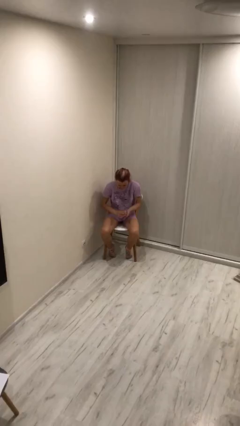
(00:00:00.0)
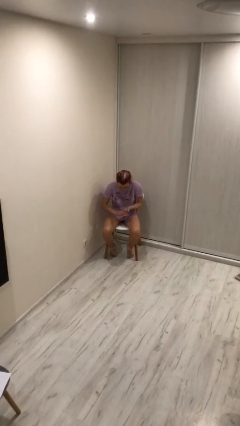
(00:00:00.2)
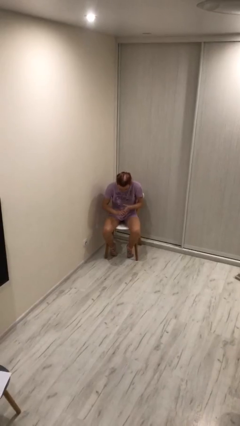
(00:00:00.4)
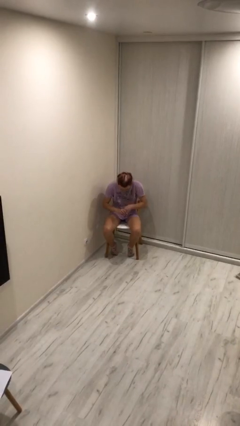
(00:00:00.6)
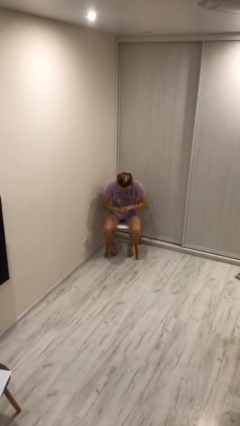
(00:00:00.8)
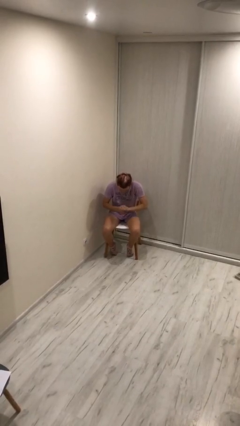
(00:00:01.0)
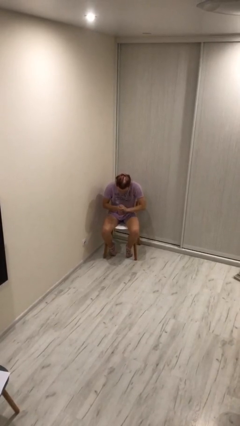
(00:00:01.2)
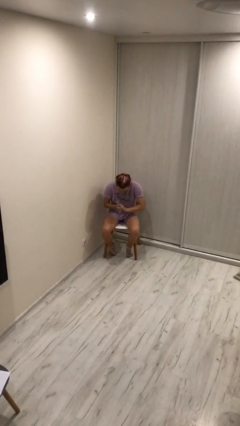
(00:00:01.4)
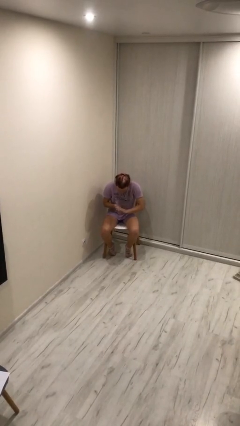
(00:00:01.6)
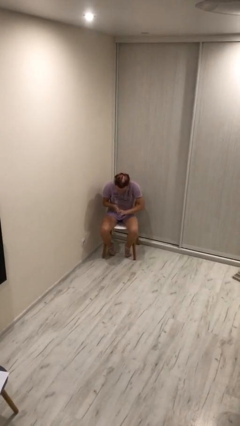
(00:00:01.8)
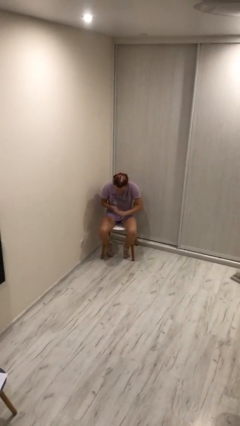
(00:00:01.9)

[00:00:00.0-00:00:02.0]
person looks at hands in lap

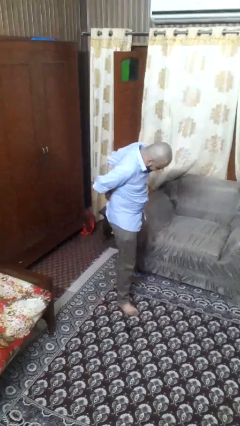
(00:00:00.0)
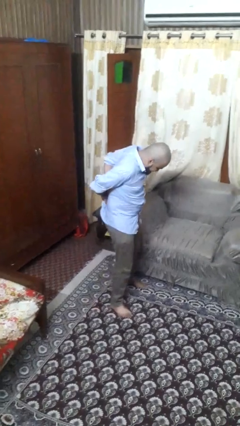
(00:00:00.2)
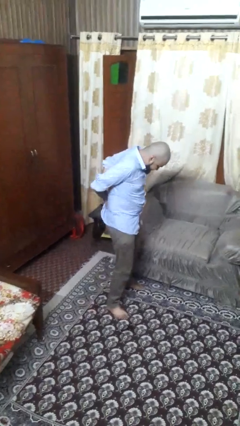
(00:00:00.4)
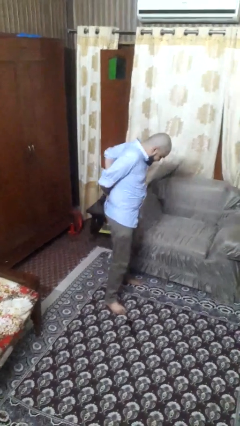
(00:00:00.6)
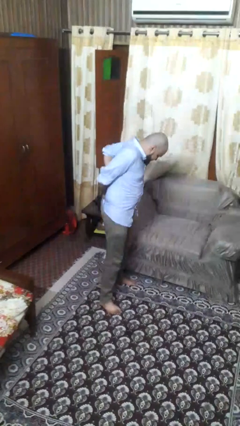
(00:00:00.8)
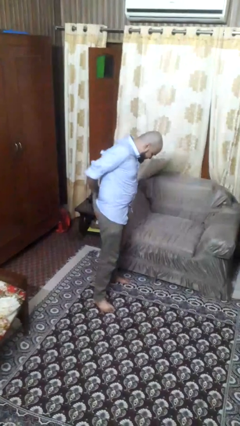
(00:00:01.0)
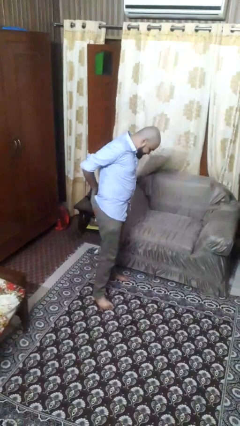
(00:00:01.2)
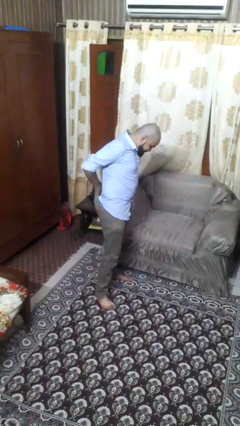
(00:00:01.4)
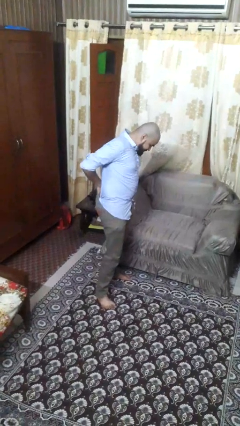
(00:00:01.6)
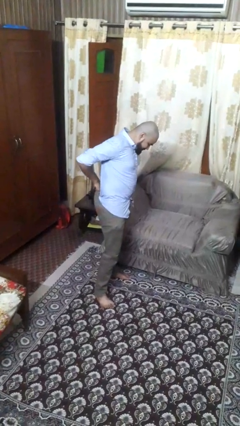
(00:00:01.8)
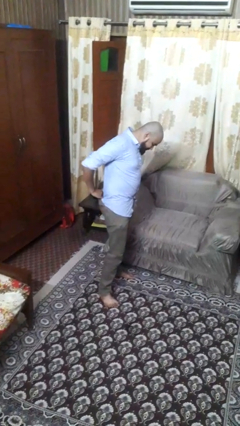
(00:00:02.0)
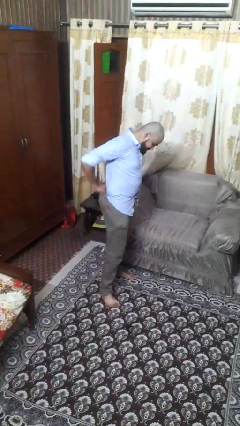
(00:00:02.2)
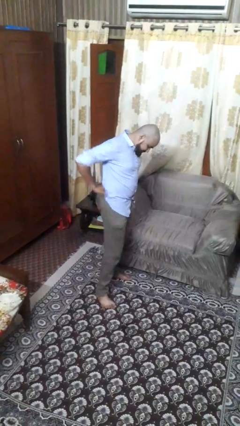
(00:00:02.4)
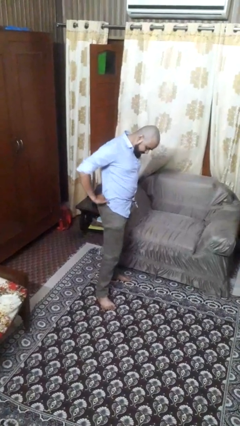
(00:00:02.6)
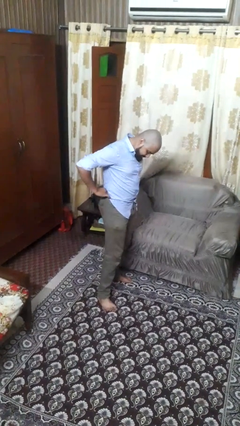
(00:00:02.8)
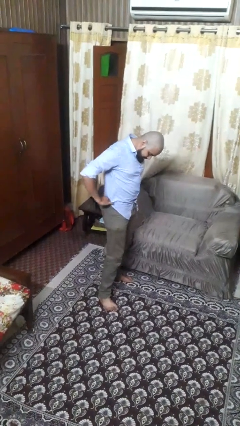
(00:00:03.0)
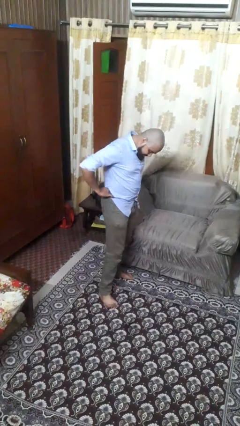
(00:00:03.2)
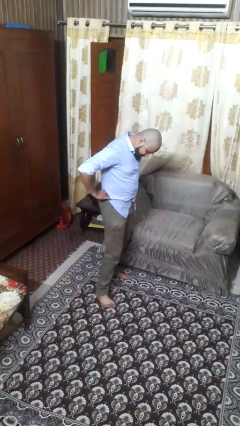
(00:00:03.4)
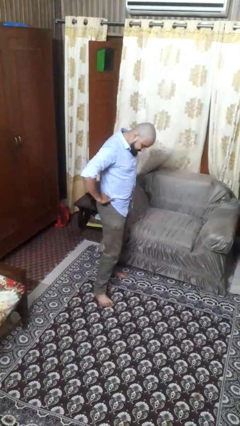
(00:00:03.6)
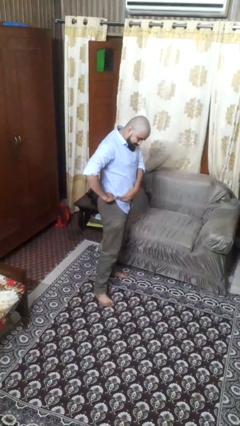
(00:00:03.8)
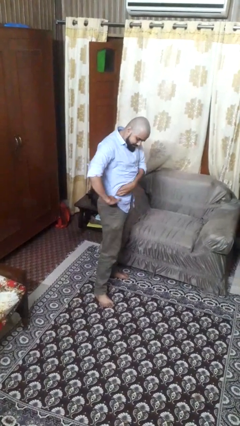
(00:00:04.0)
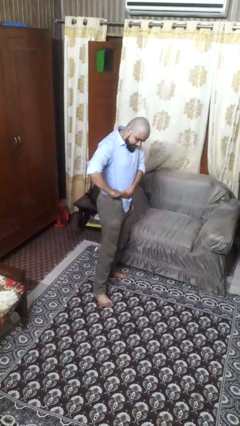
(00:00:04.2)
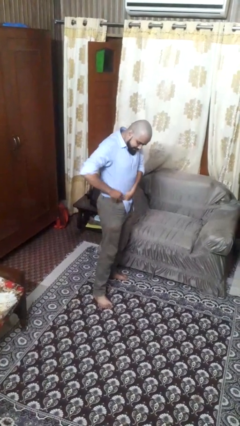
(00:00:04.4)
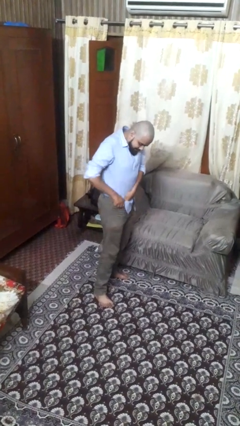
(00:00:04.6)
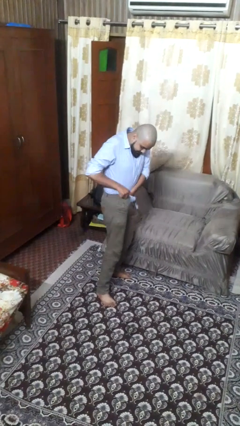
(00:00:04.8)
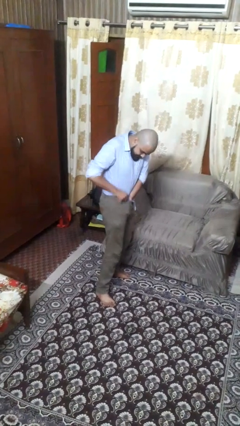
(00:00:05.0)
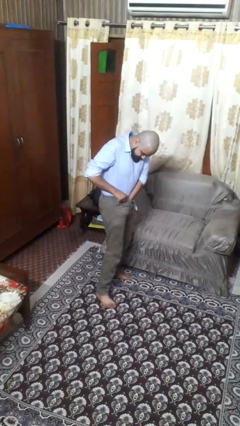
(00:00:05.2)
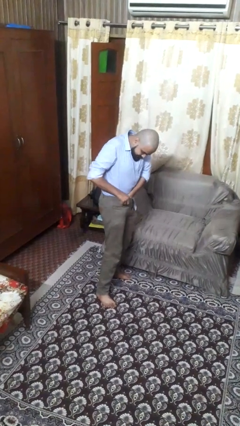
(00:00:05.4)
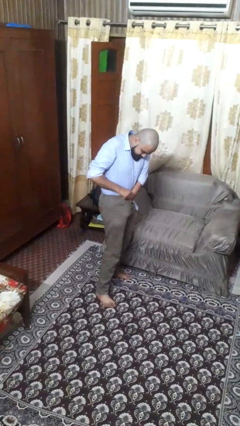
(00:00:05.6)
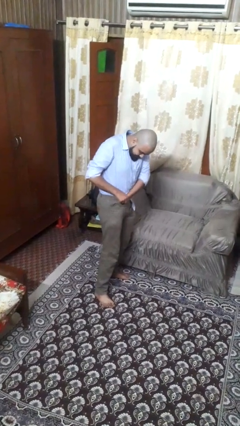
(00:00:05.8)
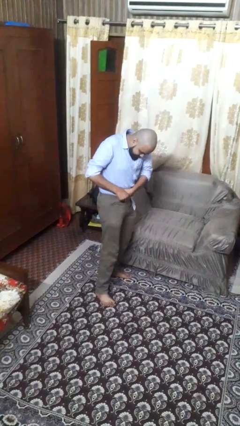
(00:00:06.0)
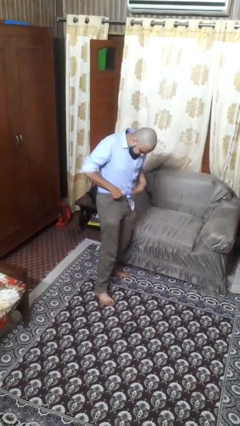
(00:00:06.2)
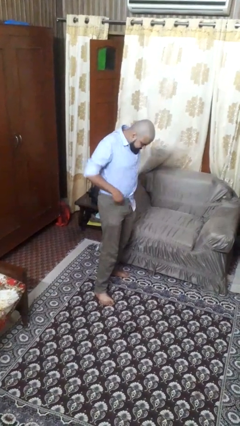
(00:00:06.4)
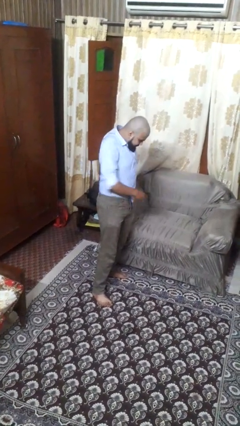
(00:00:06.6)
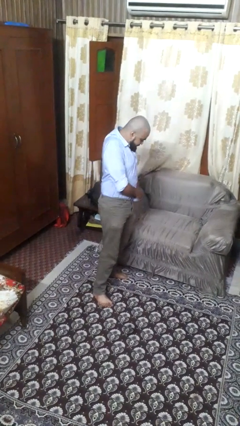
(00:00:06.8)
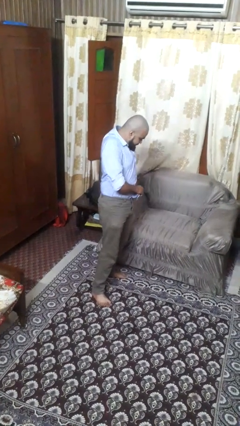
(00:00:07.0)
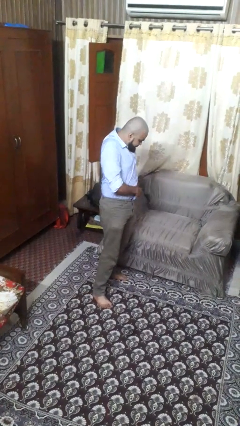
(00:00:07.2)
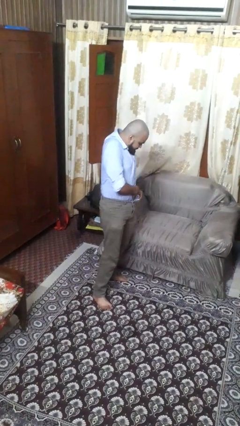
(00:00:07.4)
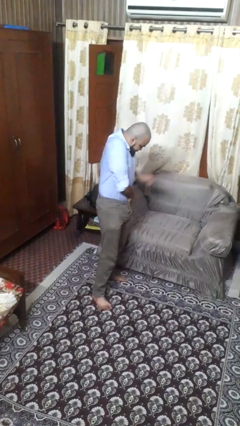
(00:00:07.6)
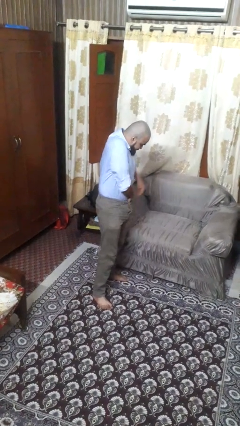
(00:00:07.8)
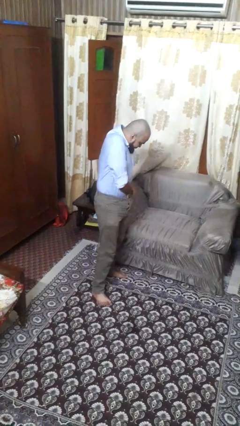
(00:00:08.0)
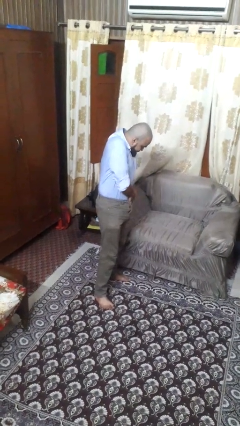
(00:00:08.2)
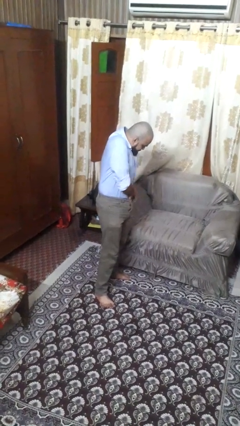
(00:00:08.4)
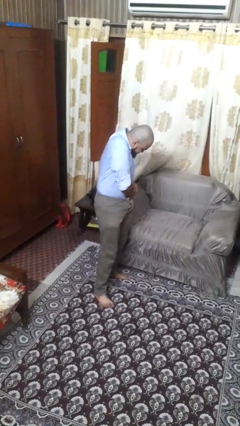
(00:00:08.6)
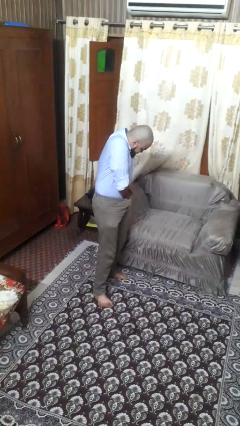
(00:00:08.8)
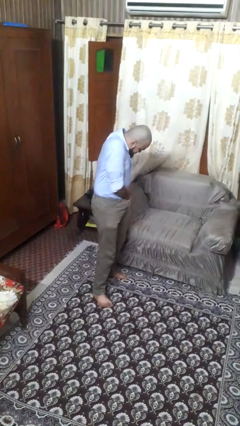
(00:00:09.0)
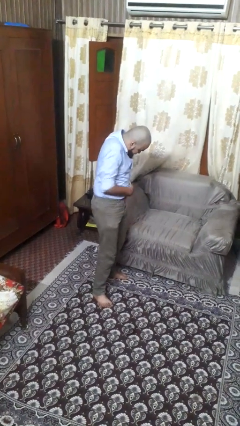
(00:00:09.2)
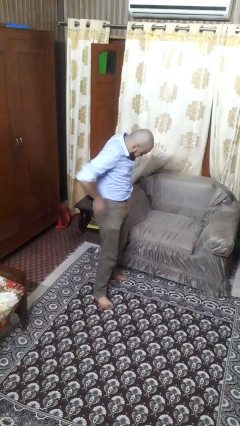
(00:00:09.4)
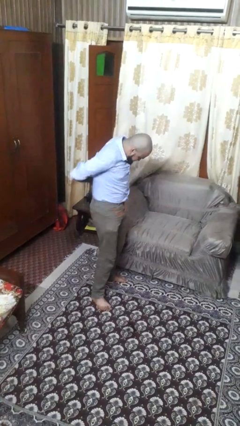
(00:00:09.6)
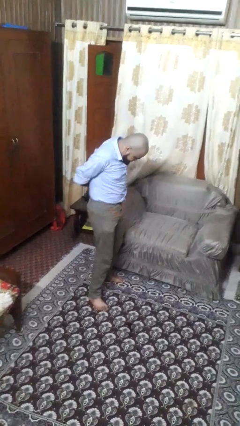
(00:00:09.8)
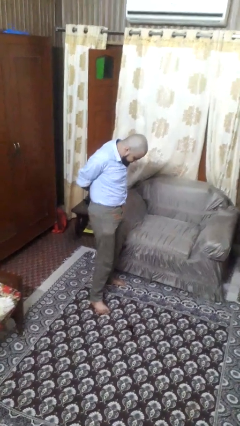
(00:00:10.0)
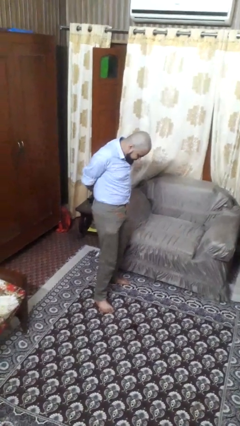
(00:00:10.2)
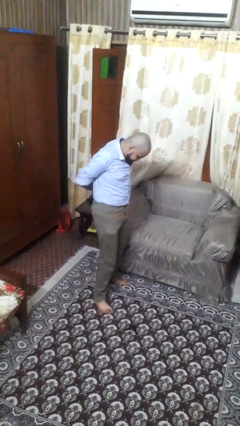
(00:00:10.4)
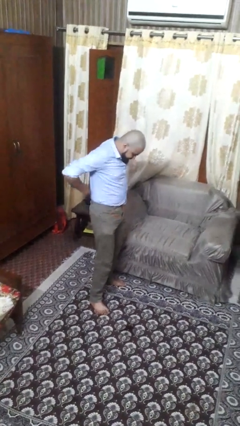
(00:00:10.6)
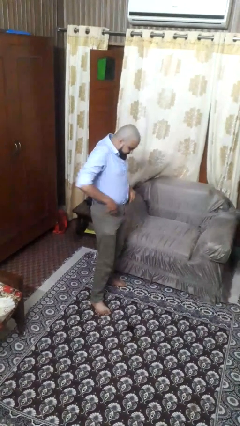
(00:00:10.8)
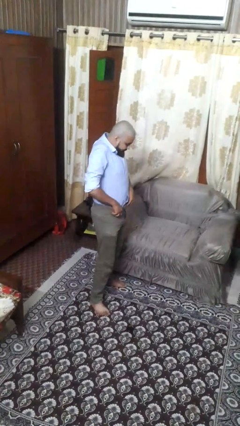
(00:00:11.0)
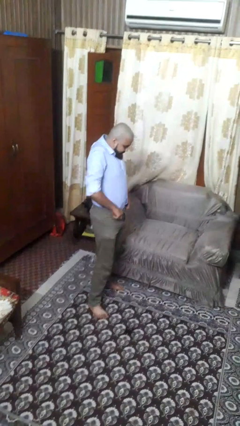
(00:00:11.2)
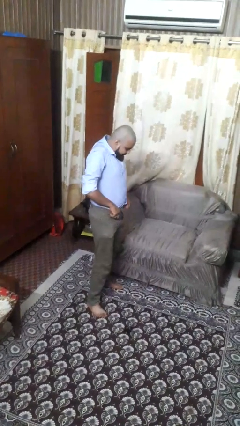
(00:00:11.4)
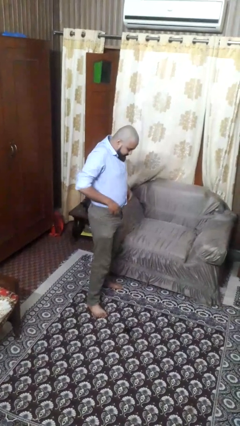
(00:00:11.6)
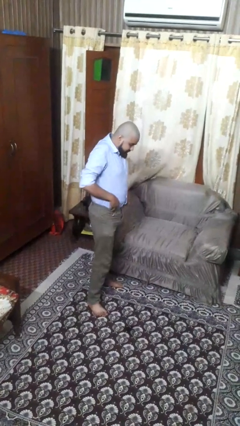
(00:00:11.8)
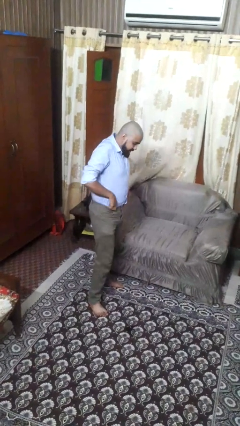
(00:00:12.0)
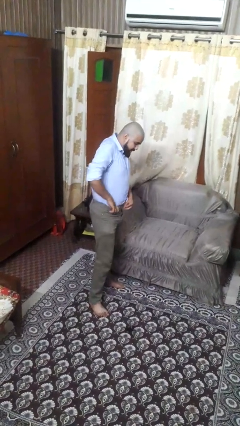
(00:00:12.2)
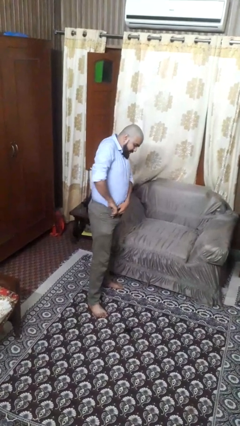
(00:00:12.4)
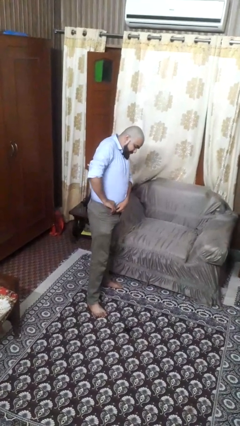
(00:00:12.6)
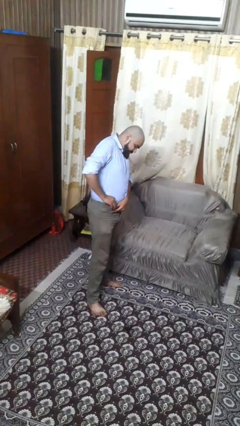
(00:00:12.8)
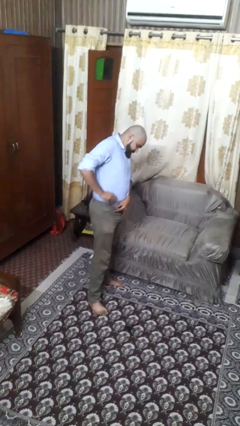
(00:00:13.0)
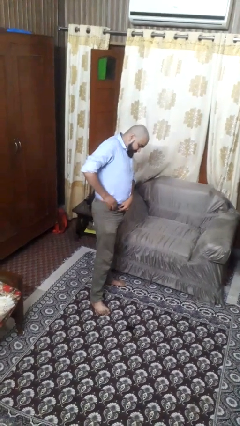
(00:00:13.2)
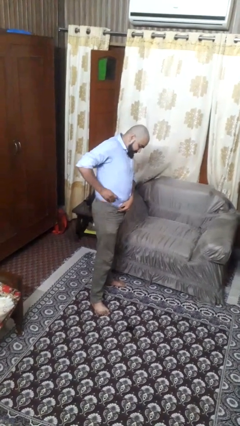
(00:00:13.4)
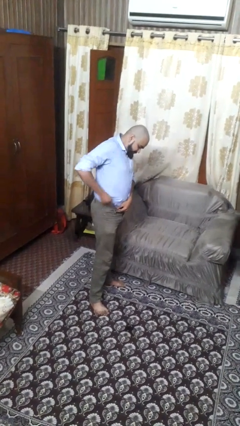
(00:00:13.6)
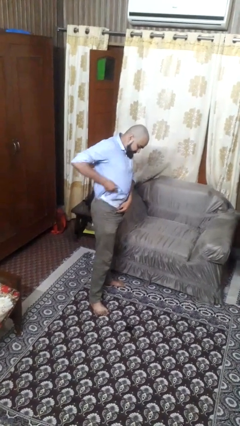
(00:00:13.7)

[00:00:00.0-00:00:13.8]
person tucks in shirt

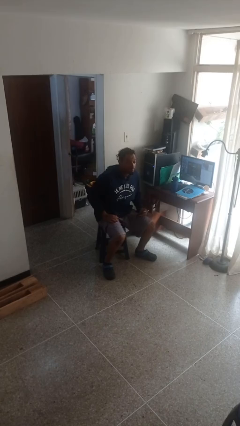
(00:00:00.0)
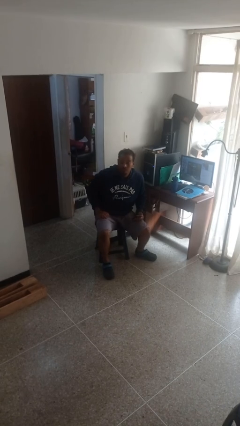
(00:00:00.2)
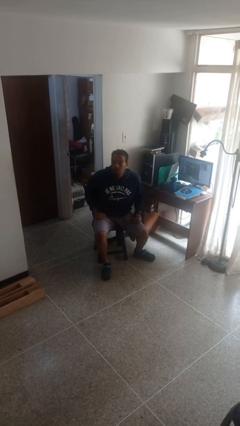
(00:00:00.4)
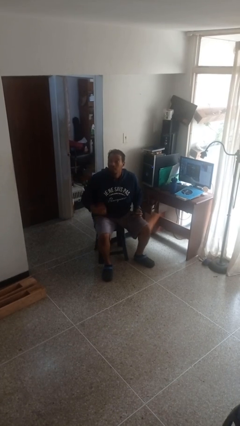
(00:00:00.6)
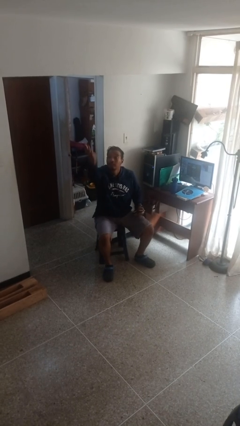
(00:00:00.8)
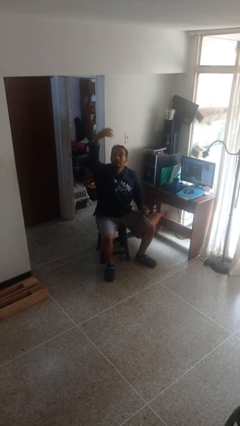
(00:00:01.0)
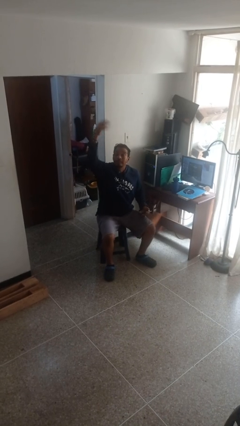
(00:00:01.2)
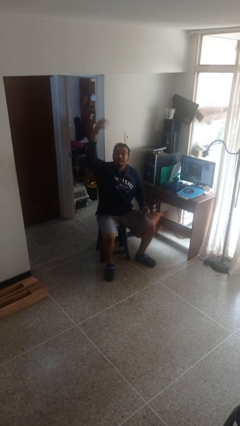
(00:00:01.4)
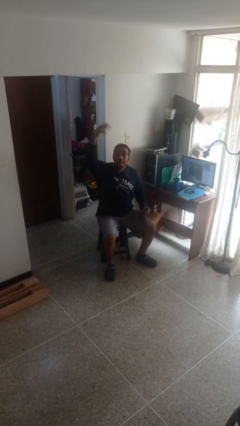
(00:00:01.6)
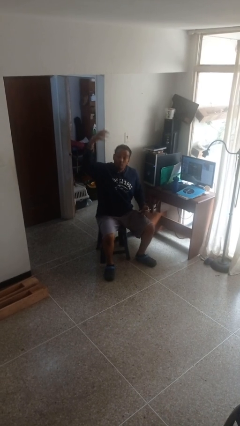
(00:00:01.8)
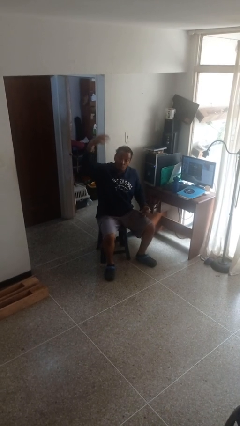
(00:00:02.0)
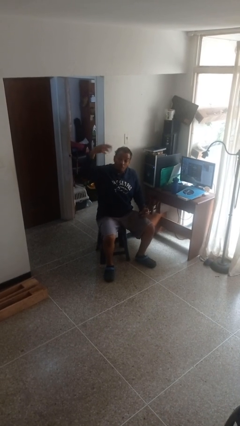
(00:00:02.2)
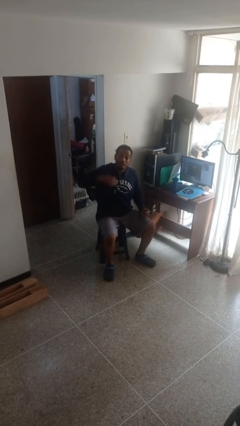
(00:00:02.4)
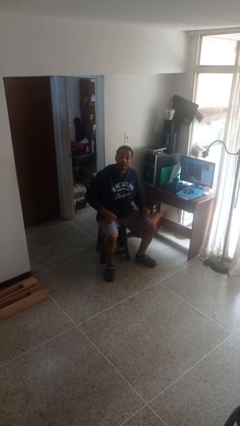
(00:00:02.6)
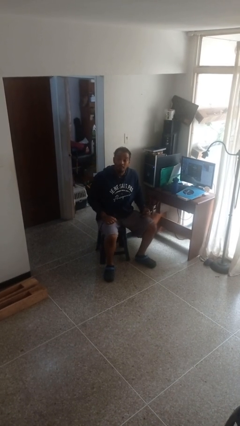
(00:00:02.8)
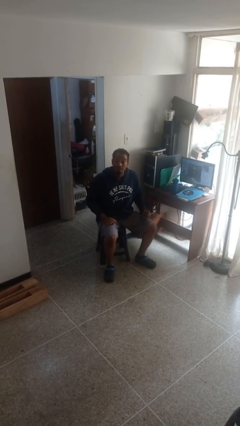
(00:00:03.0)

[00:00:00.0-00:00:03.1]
person gestures come here
